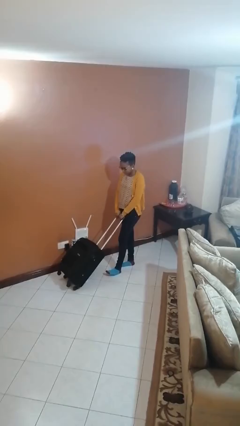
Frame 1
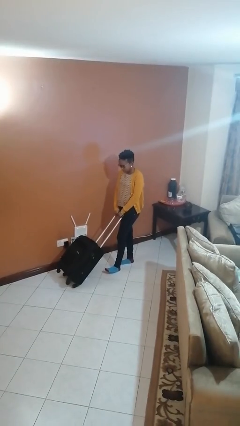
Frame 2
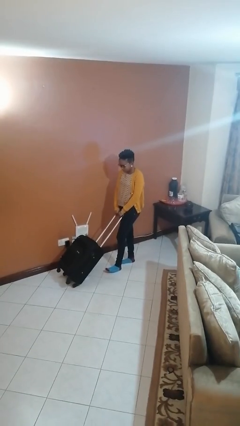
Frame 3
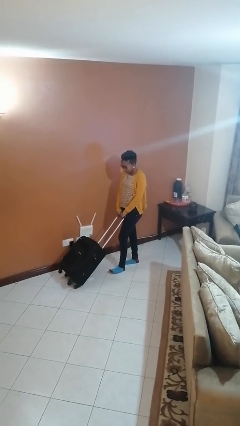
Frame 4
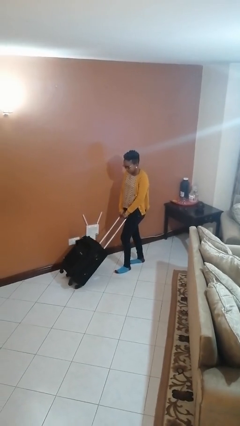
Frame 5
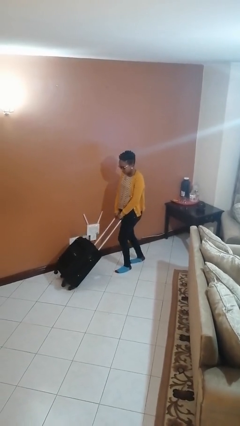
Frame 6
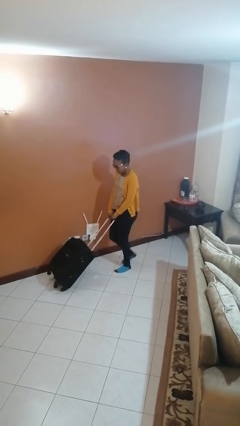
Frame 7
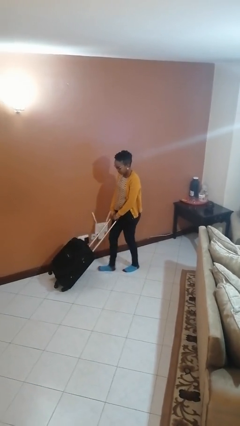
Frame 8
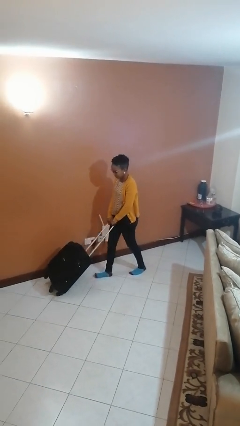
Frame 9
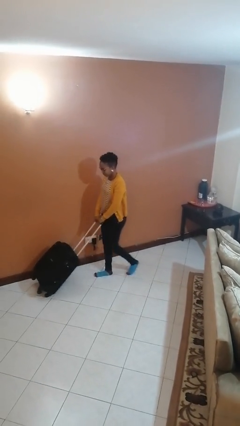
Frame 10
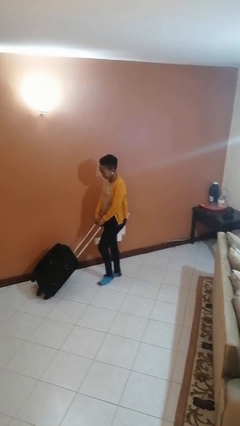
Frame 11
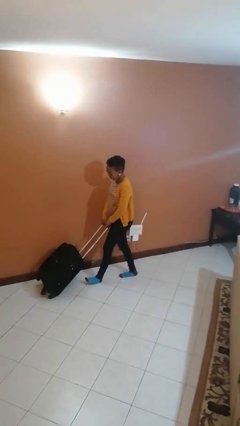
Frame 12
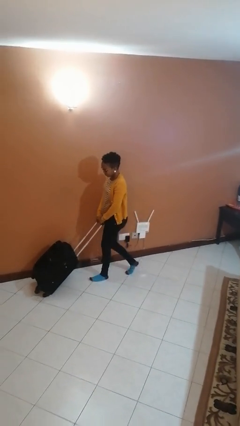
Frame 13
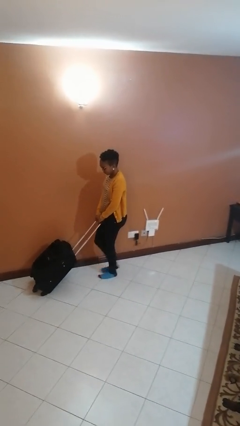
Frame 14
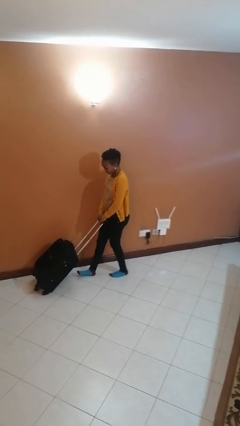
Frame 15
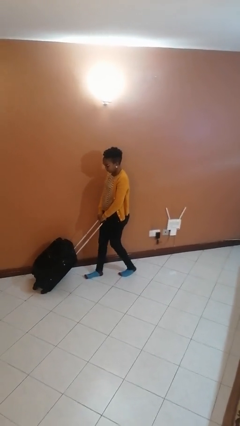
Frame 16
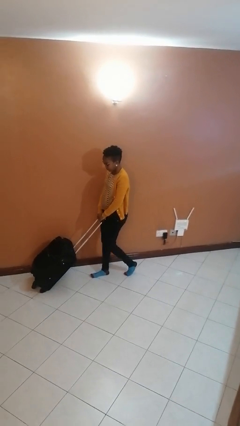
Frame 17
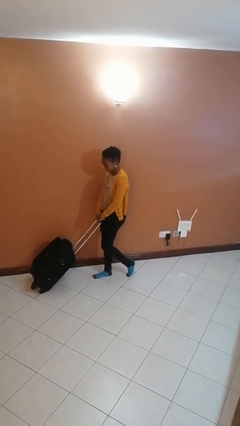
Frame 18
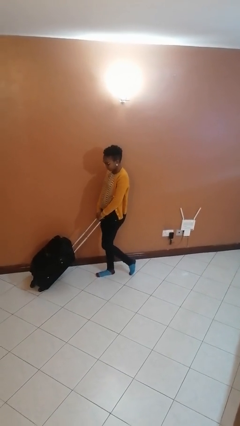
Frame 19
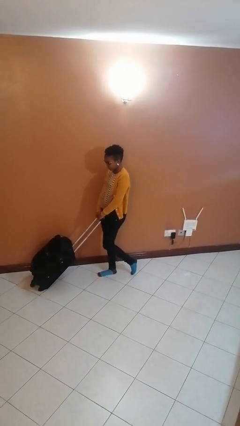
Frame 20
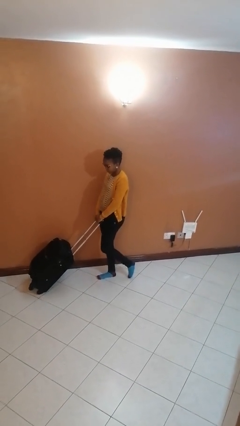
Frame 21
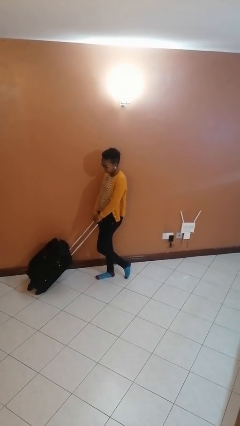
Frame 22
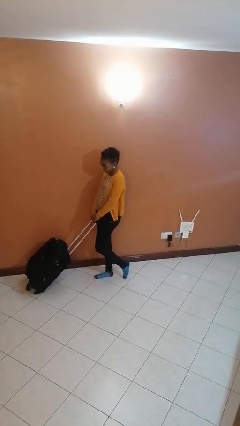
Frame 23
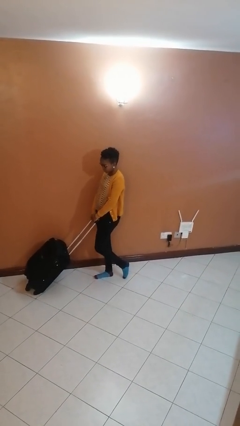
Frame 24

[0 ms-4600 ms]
person pushes wheeled cart

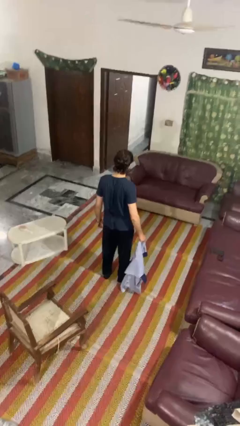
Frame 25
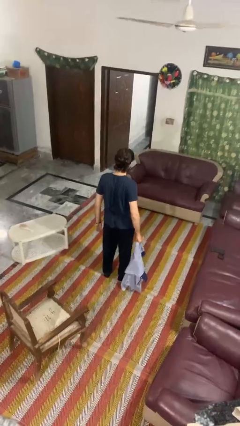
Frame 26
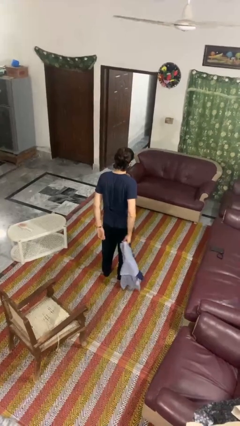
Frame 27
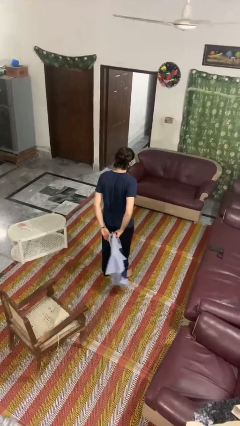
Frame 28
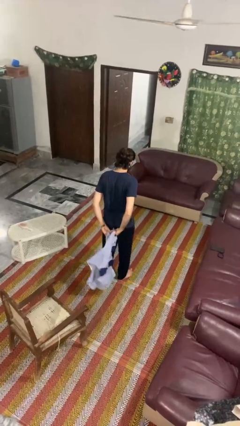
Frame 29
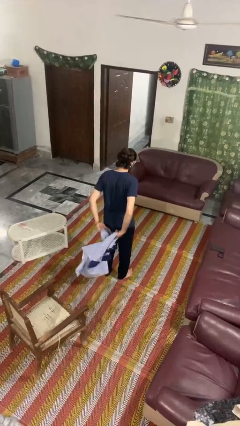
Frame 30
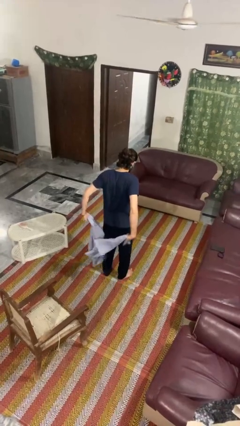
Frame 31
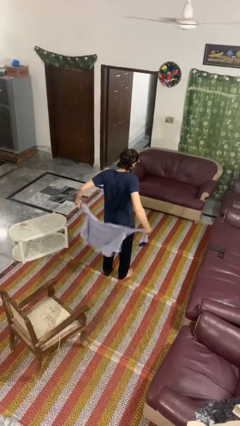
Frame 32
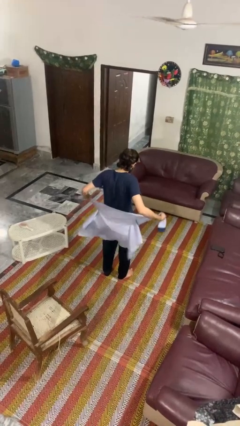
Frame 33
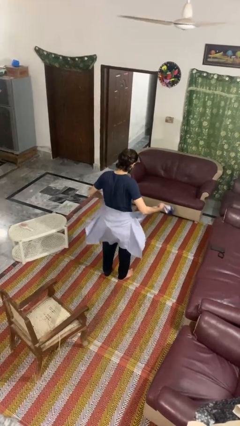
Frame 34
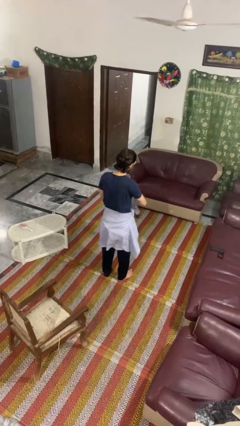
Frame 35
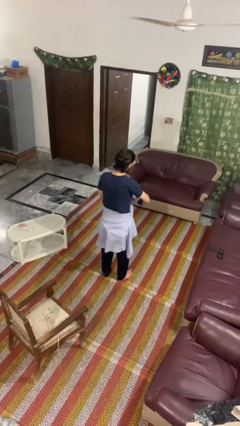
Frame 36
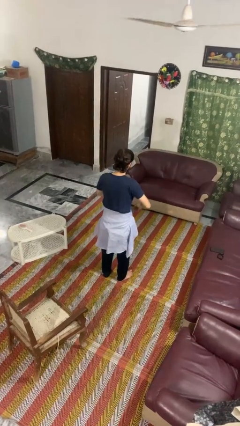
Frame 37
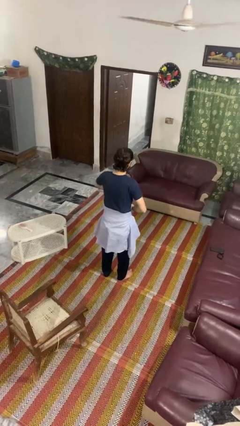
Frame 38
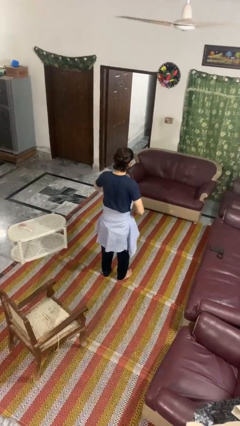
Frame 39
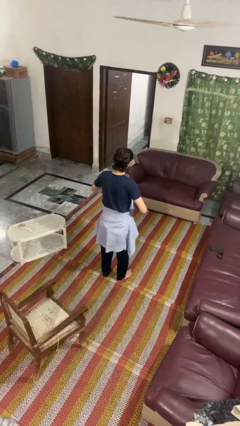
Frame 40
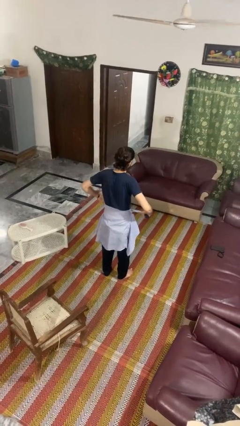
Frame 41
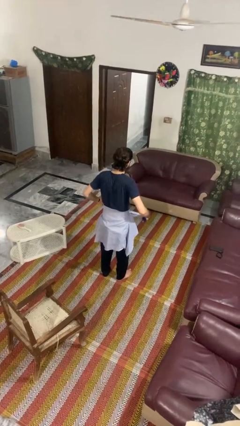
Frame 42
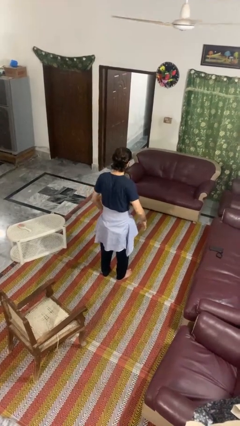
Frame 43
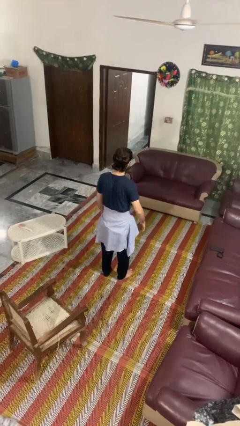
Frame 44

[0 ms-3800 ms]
person ties jacket around waist

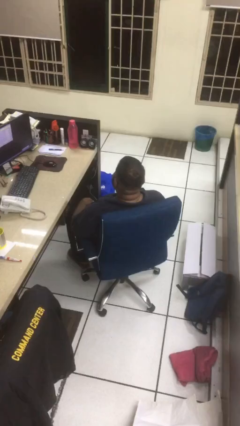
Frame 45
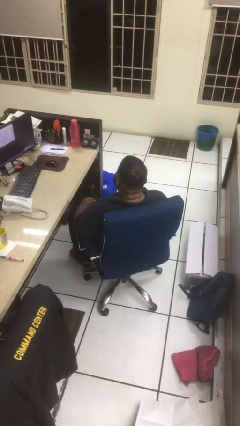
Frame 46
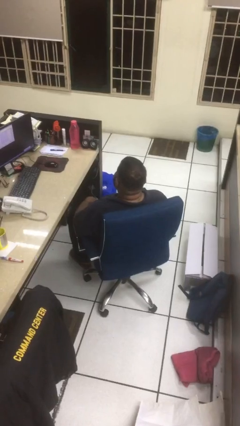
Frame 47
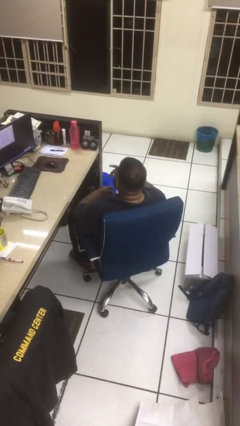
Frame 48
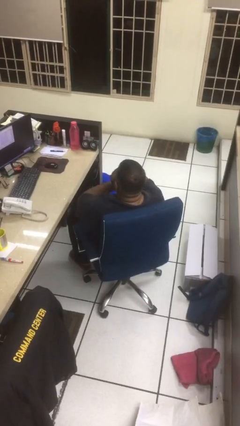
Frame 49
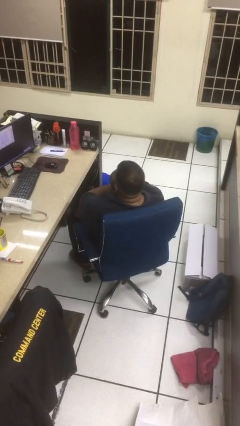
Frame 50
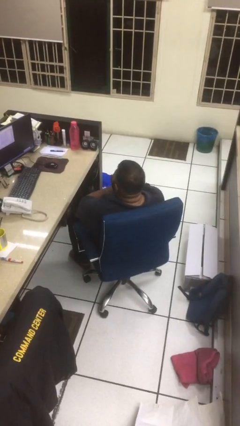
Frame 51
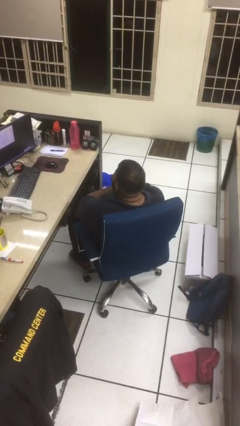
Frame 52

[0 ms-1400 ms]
person strokes chin

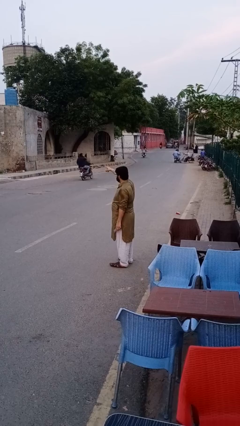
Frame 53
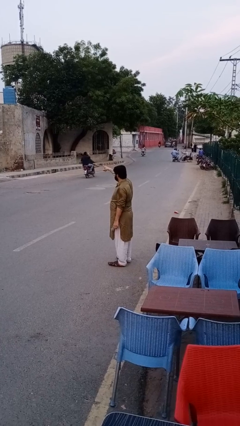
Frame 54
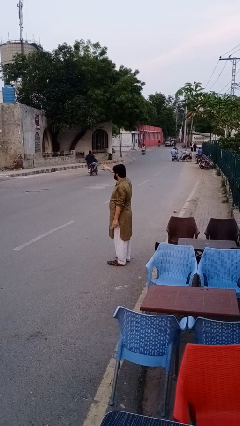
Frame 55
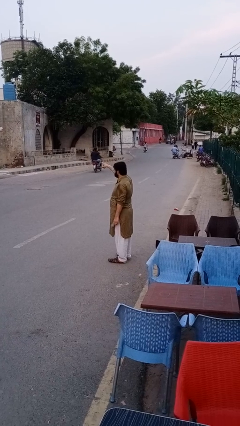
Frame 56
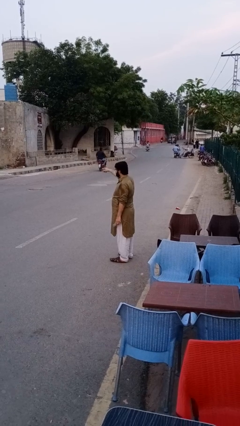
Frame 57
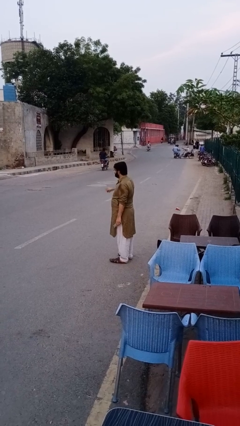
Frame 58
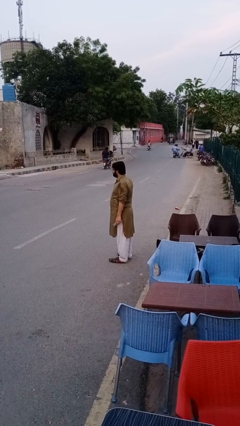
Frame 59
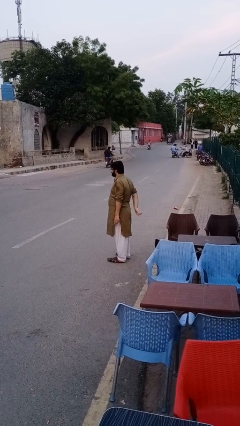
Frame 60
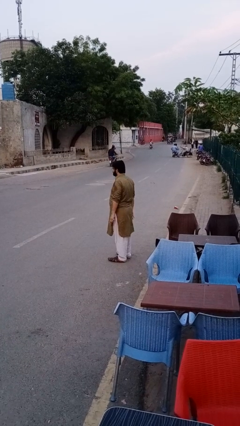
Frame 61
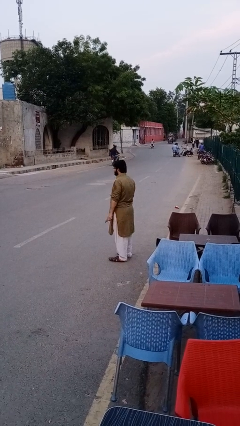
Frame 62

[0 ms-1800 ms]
person puts phone into pocket

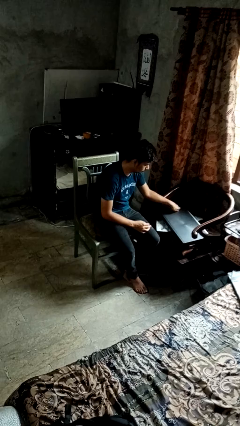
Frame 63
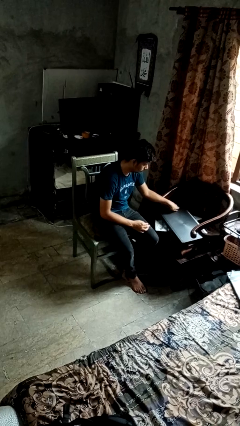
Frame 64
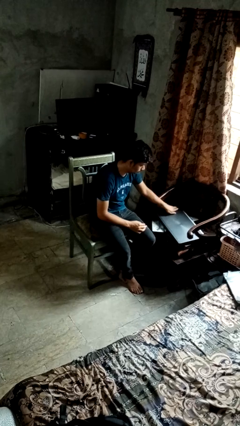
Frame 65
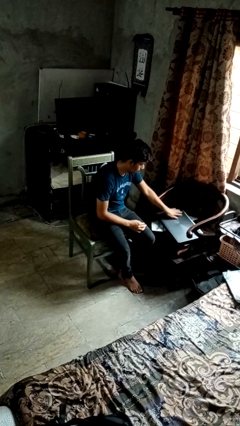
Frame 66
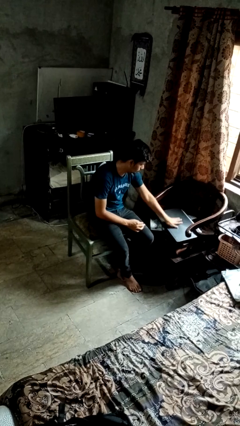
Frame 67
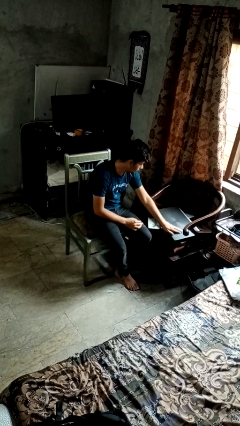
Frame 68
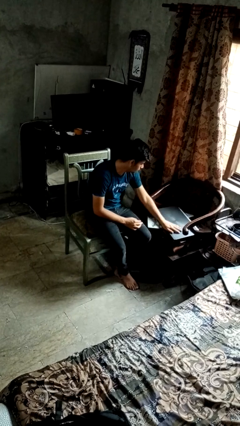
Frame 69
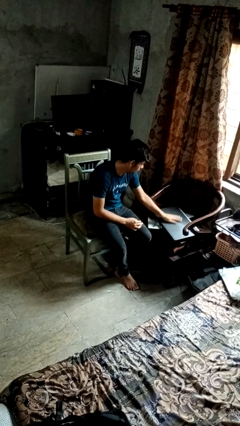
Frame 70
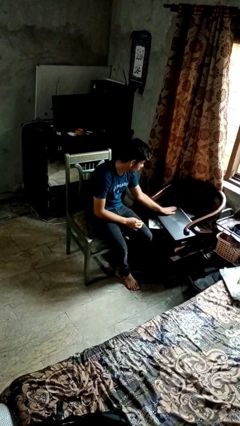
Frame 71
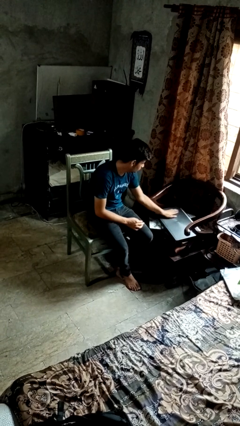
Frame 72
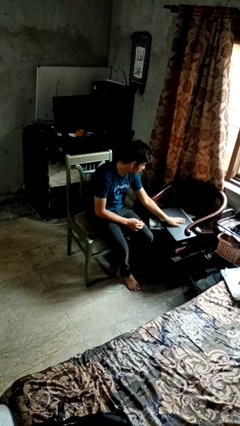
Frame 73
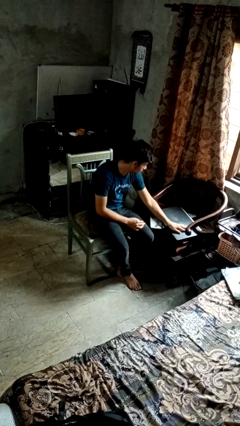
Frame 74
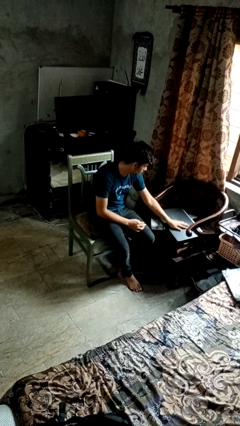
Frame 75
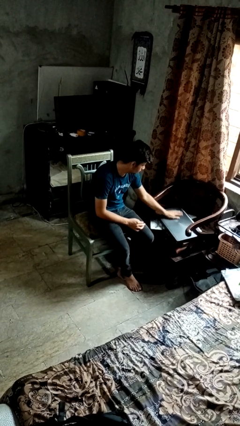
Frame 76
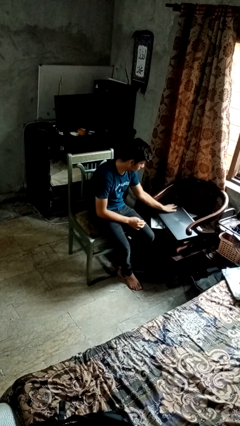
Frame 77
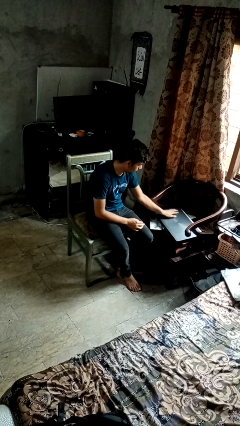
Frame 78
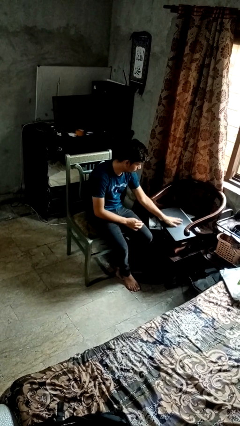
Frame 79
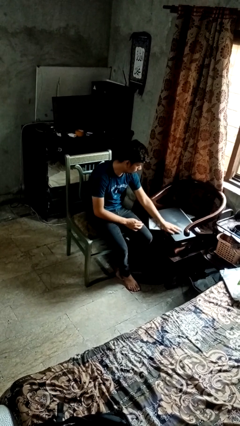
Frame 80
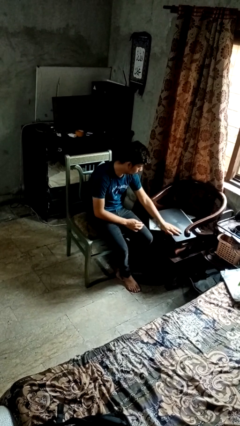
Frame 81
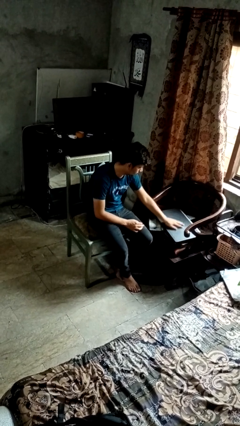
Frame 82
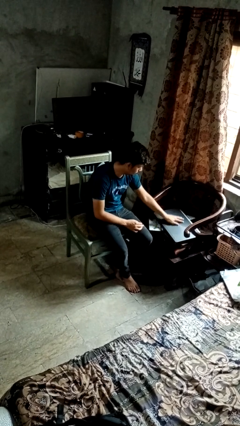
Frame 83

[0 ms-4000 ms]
person waves hand over object

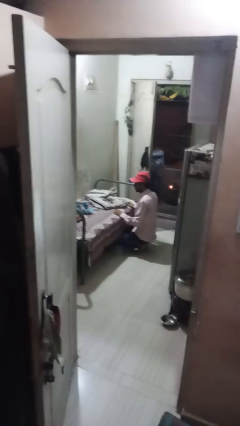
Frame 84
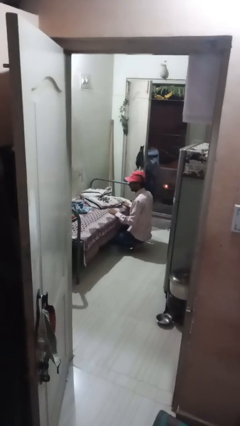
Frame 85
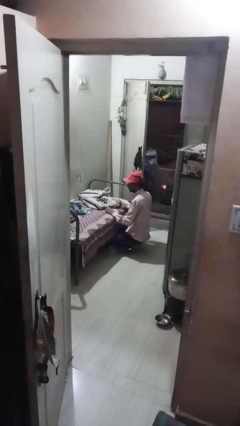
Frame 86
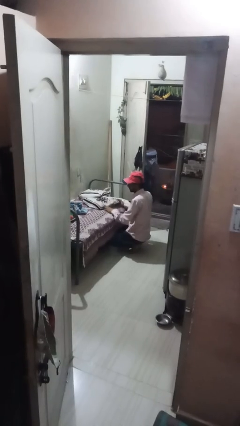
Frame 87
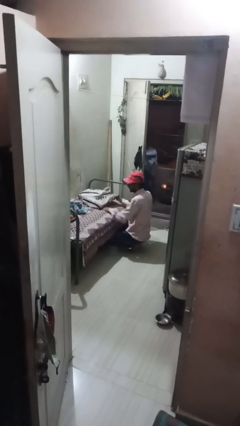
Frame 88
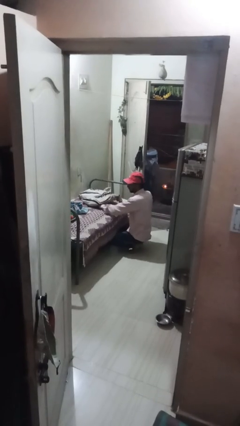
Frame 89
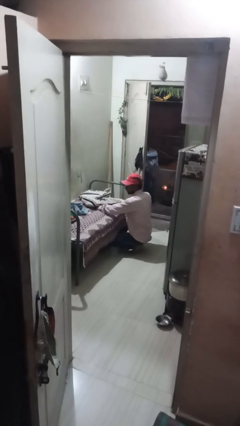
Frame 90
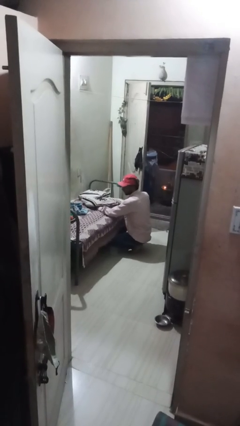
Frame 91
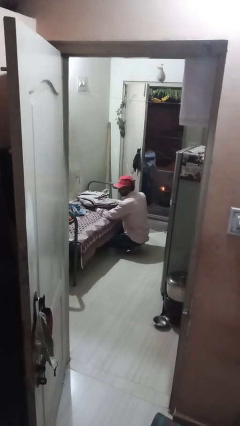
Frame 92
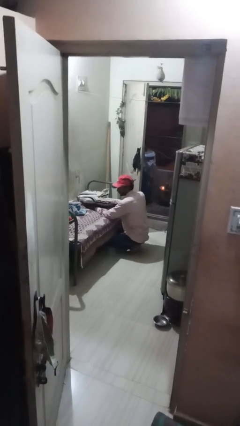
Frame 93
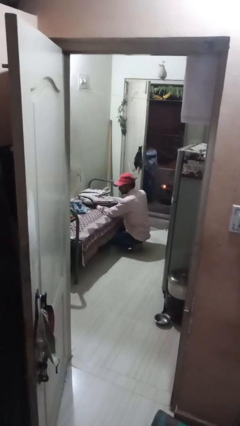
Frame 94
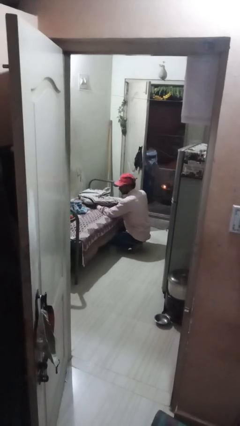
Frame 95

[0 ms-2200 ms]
person searches in couch
